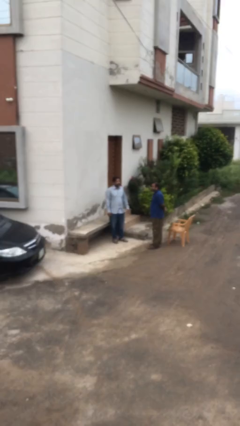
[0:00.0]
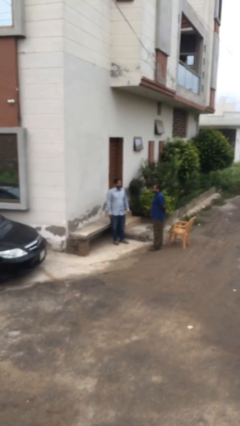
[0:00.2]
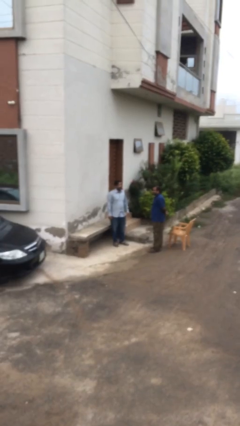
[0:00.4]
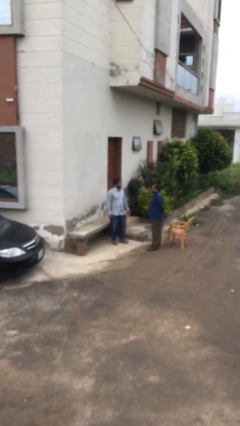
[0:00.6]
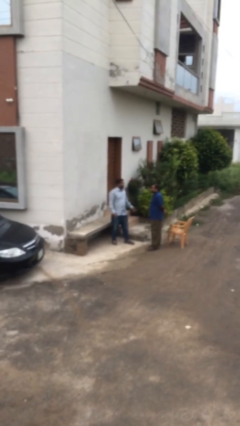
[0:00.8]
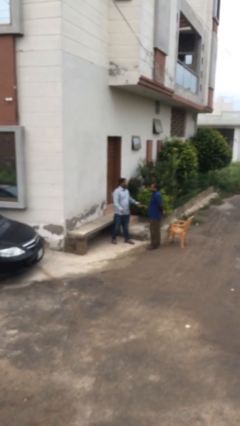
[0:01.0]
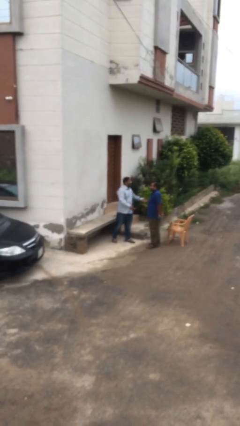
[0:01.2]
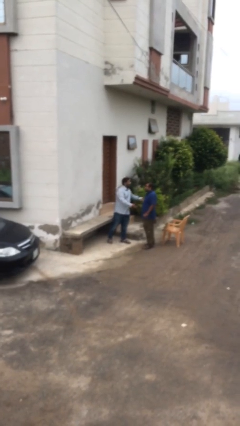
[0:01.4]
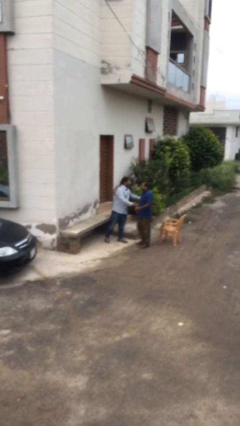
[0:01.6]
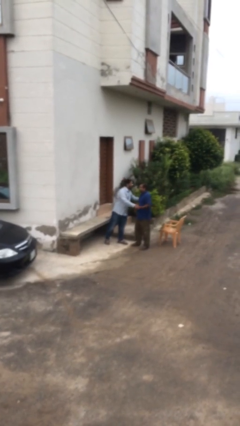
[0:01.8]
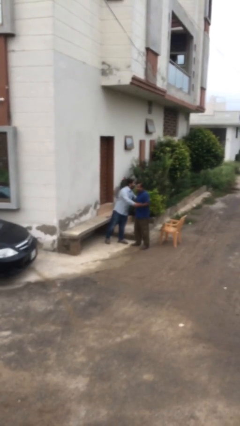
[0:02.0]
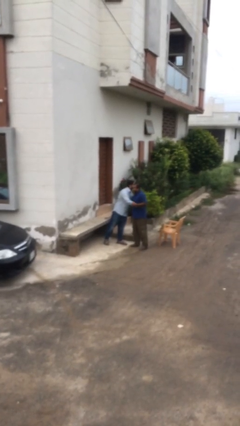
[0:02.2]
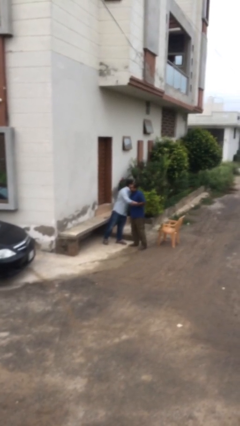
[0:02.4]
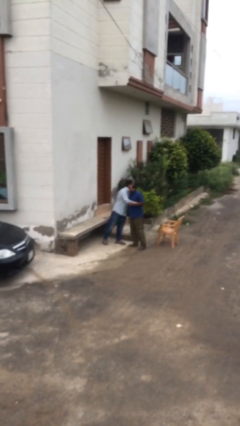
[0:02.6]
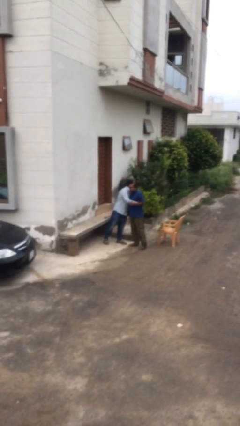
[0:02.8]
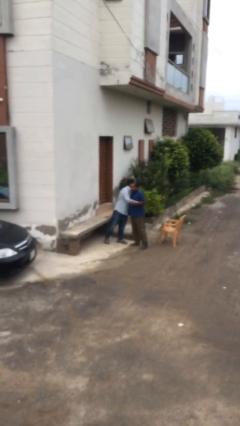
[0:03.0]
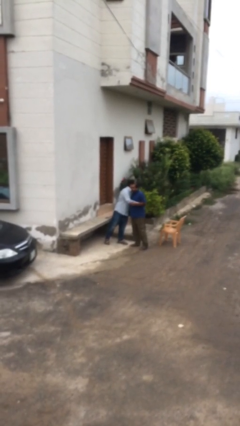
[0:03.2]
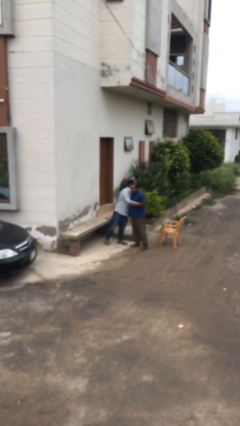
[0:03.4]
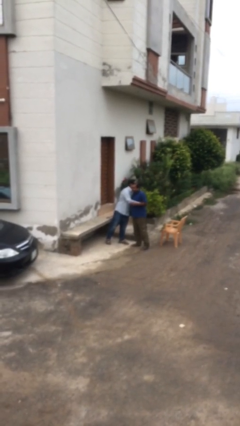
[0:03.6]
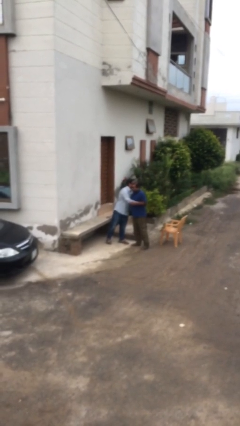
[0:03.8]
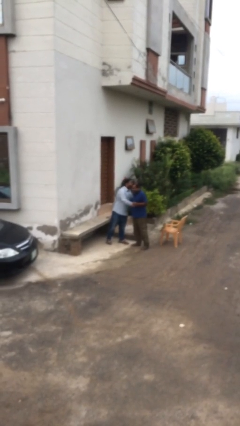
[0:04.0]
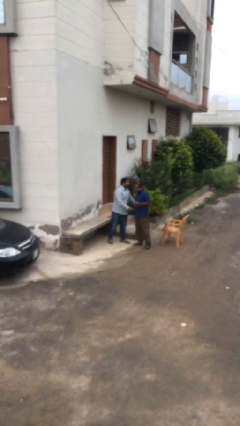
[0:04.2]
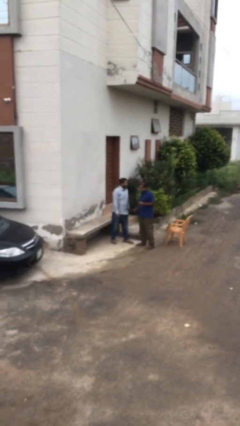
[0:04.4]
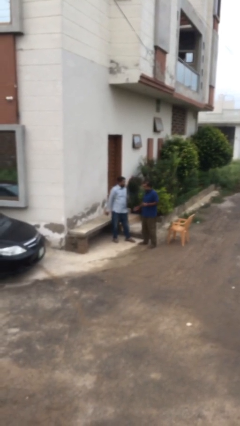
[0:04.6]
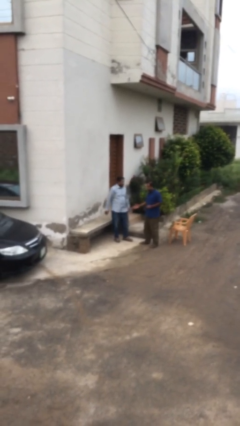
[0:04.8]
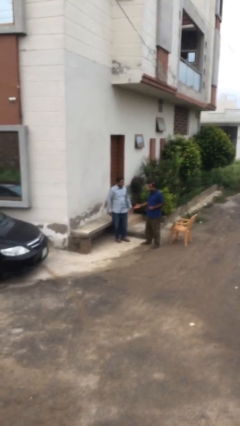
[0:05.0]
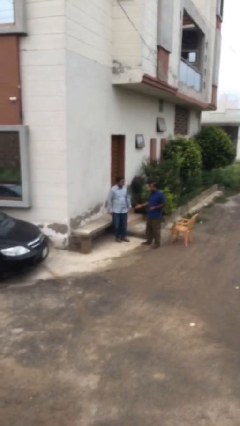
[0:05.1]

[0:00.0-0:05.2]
person embraces person

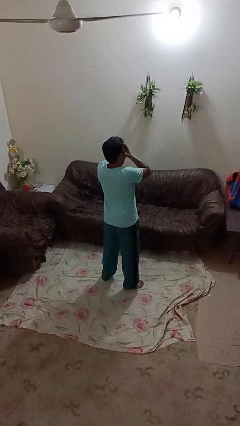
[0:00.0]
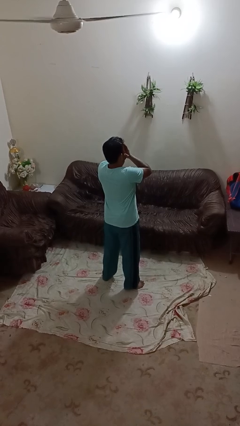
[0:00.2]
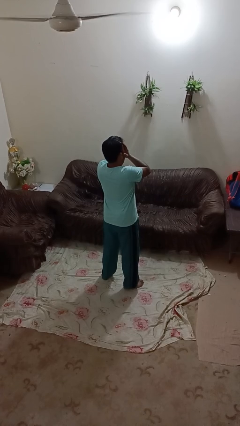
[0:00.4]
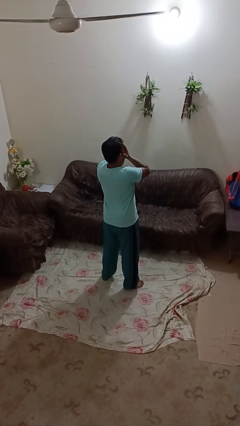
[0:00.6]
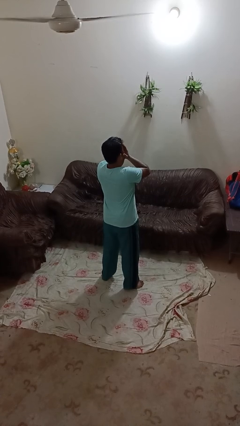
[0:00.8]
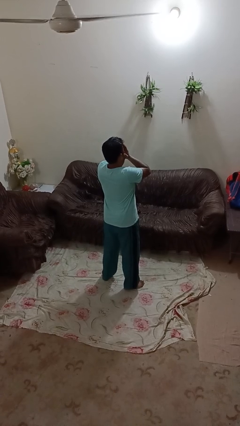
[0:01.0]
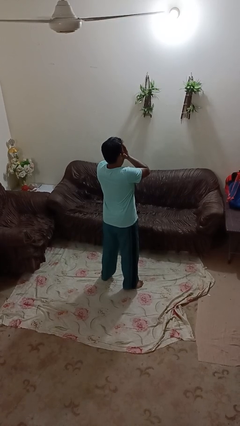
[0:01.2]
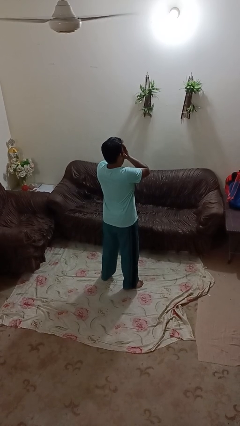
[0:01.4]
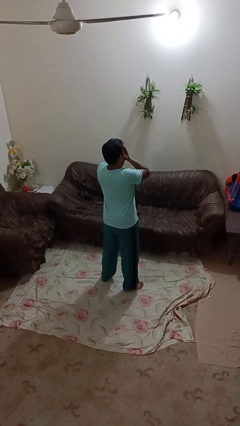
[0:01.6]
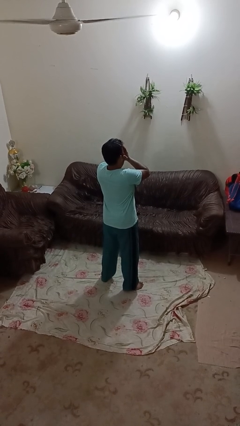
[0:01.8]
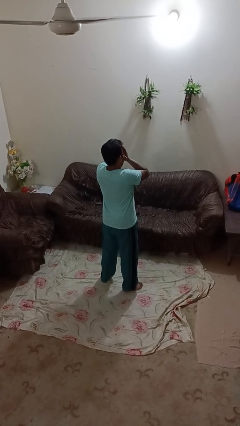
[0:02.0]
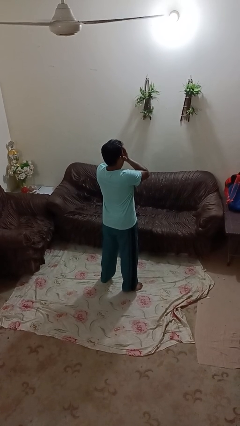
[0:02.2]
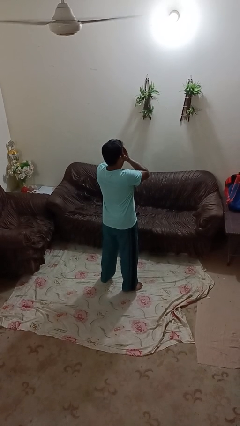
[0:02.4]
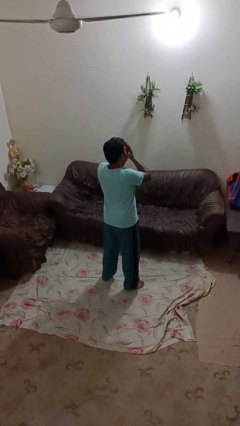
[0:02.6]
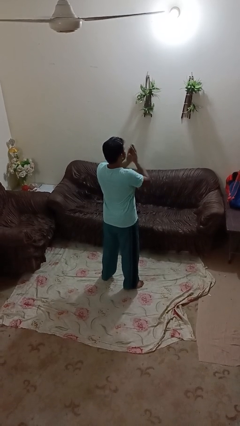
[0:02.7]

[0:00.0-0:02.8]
person covers face with hands

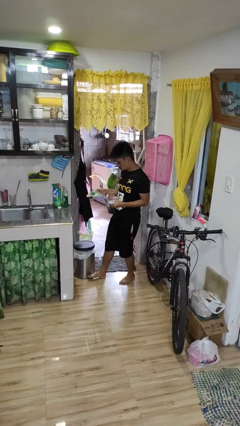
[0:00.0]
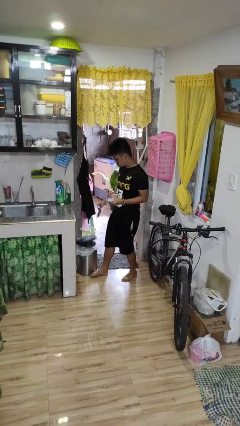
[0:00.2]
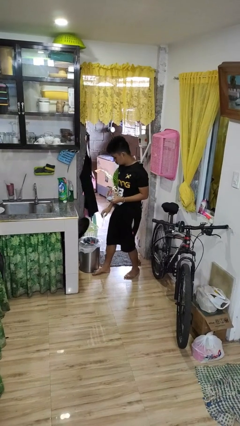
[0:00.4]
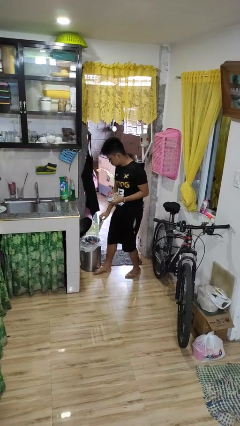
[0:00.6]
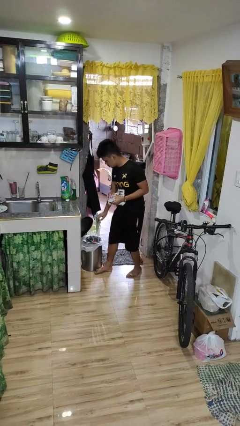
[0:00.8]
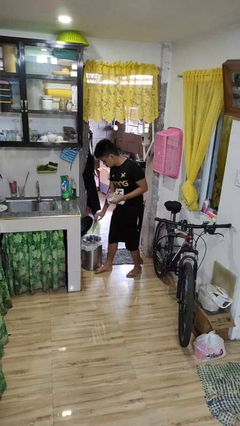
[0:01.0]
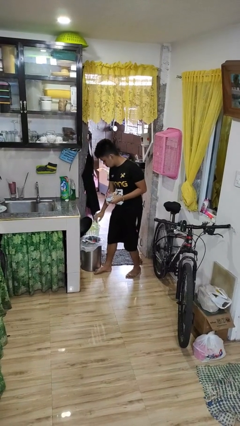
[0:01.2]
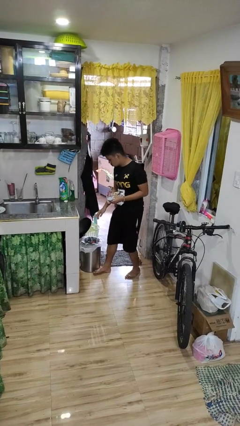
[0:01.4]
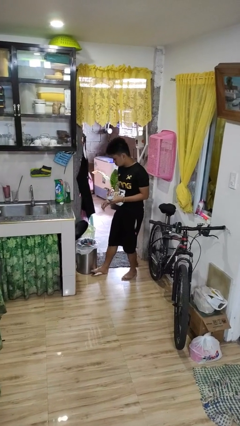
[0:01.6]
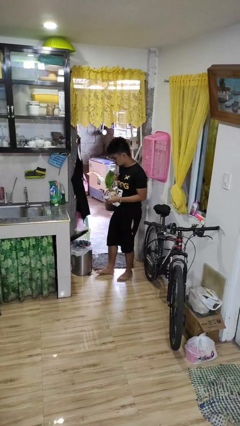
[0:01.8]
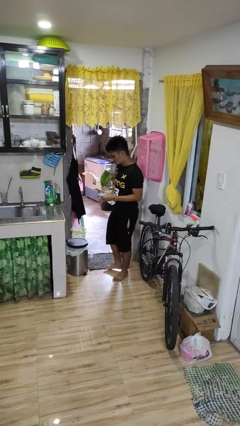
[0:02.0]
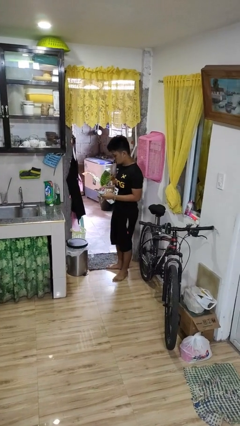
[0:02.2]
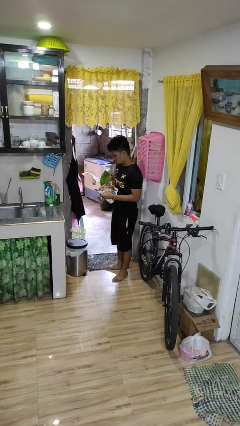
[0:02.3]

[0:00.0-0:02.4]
person discards trash

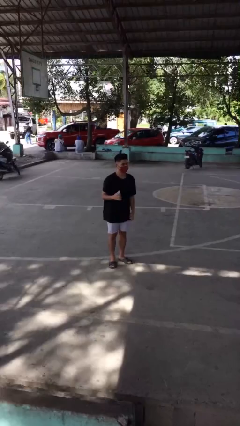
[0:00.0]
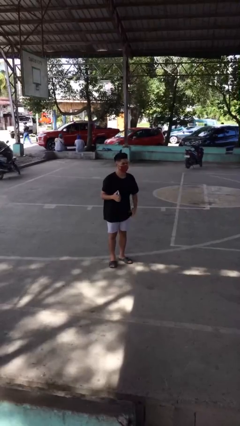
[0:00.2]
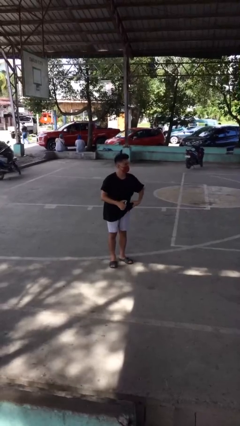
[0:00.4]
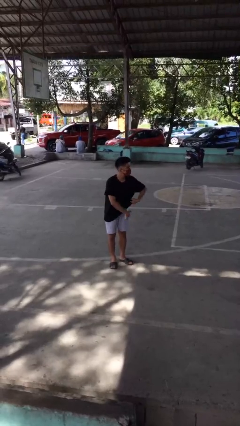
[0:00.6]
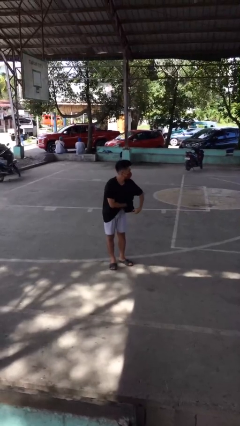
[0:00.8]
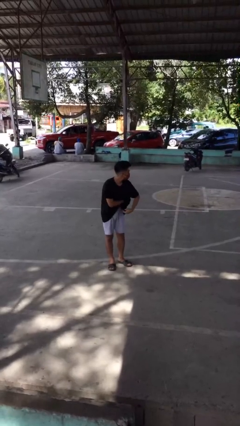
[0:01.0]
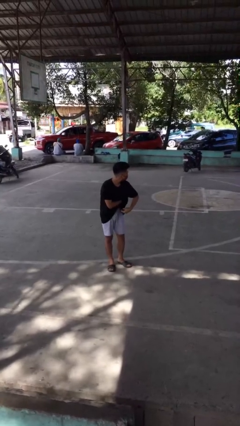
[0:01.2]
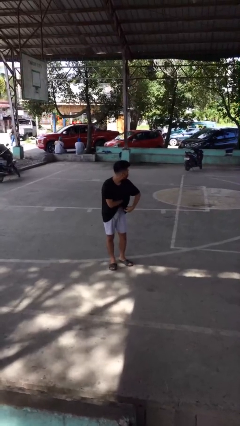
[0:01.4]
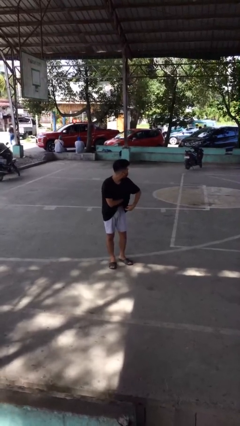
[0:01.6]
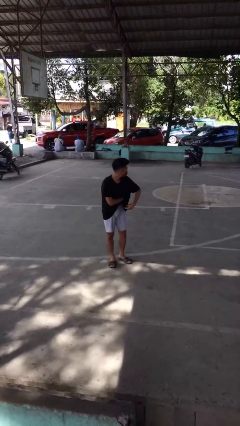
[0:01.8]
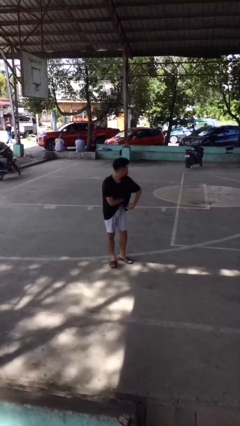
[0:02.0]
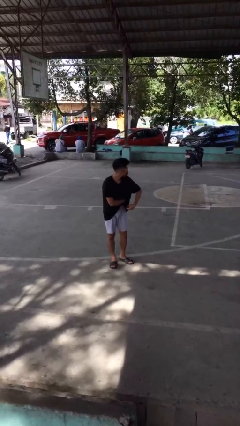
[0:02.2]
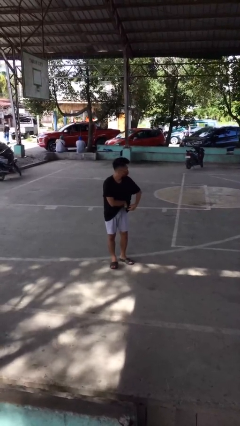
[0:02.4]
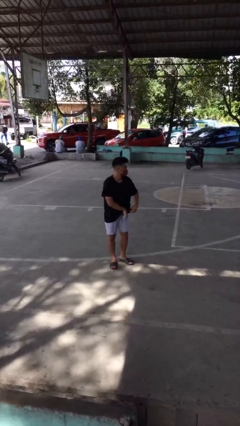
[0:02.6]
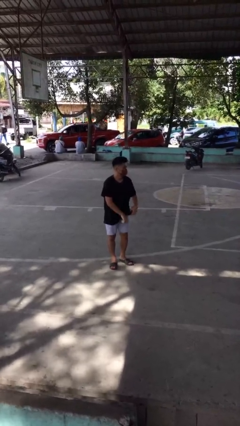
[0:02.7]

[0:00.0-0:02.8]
person applies deodorant

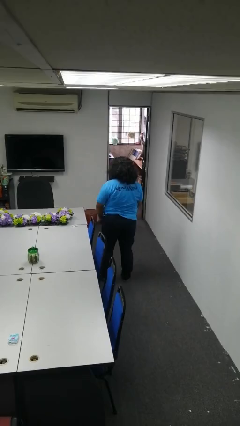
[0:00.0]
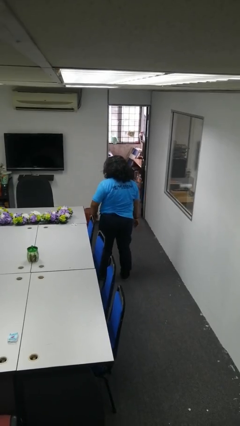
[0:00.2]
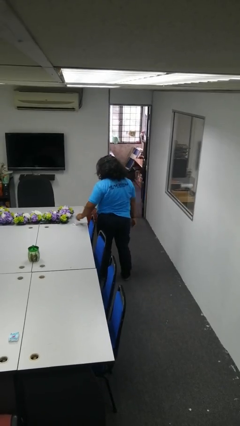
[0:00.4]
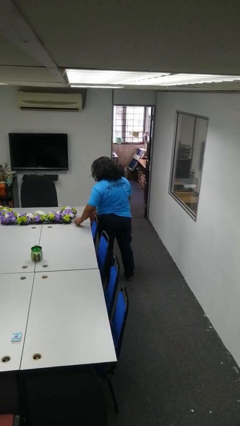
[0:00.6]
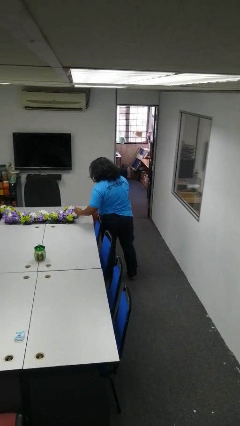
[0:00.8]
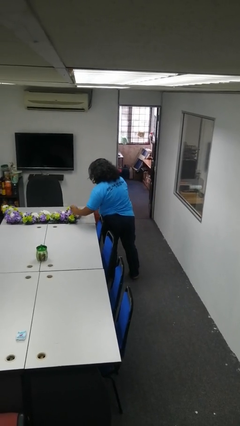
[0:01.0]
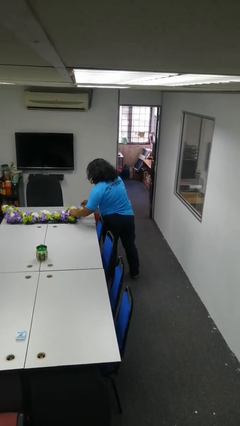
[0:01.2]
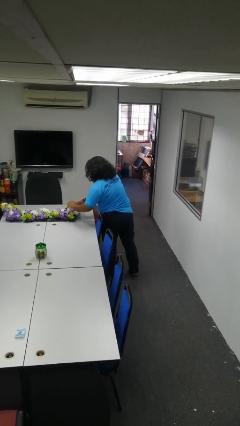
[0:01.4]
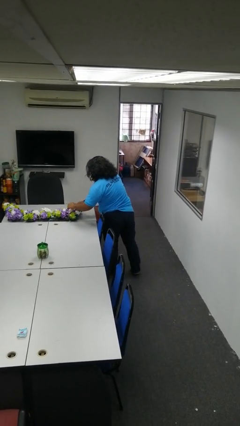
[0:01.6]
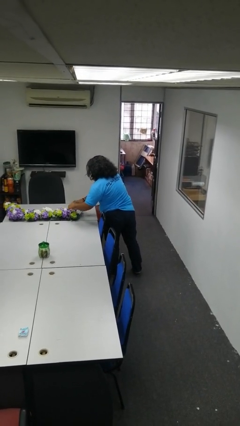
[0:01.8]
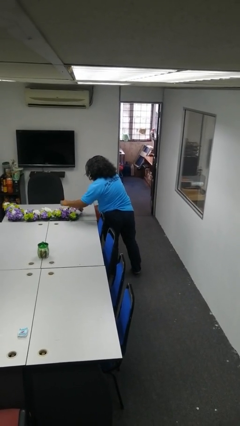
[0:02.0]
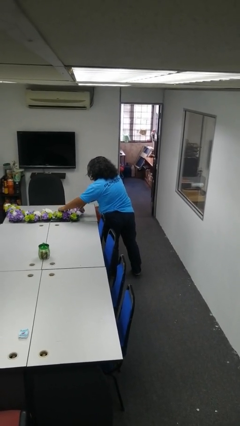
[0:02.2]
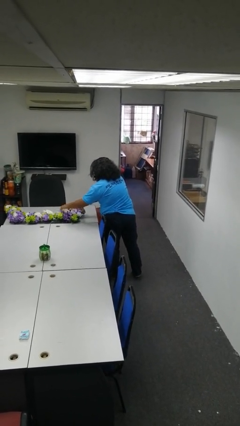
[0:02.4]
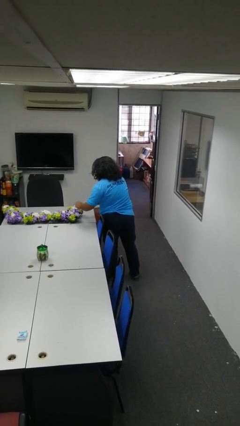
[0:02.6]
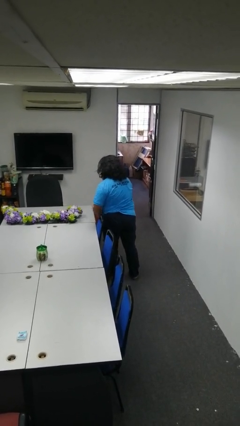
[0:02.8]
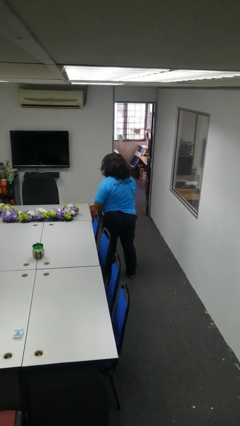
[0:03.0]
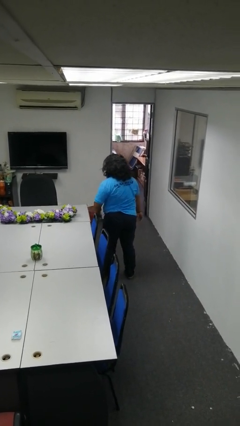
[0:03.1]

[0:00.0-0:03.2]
person arranges flowers in vase

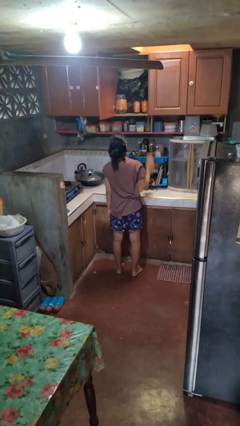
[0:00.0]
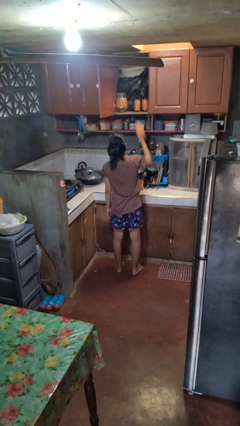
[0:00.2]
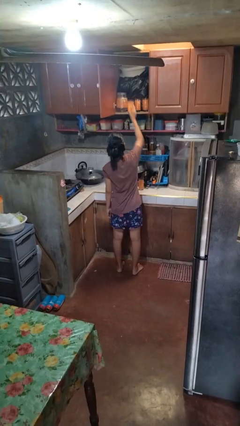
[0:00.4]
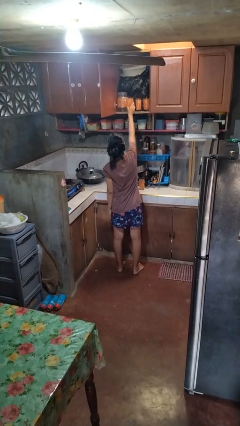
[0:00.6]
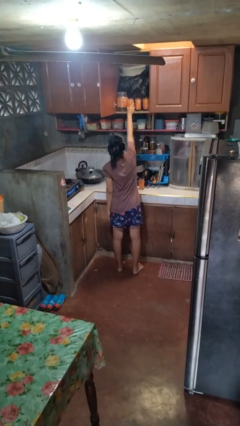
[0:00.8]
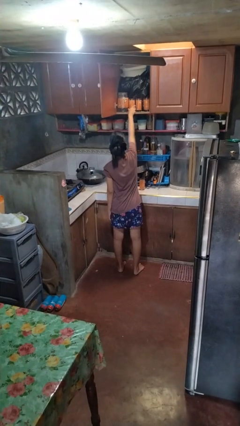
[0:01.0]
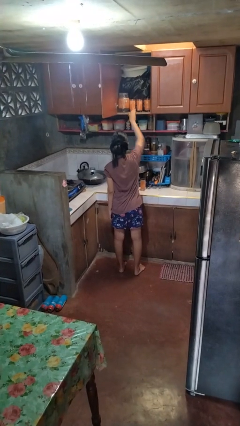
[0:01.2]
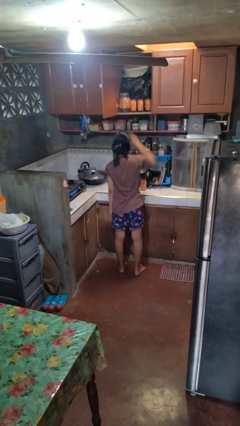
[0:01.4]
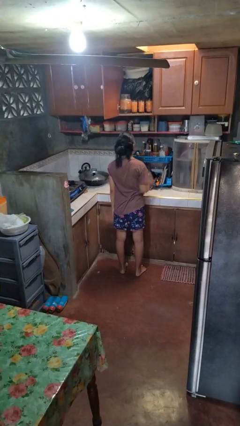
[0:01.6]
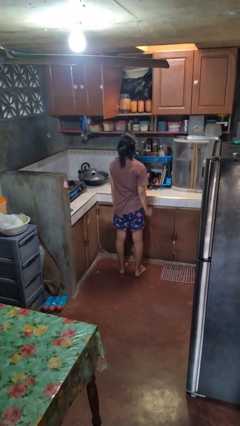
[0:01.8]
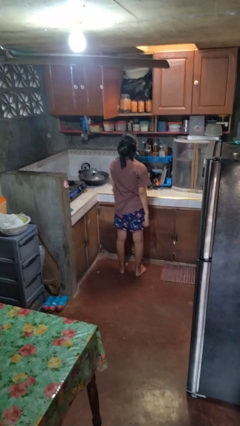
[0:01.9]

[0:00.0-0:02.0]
person puts object in cabinet
